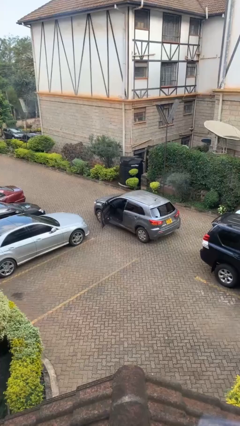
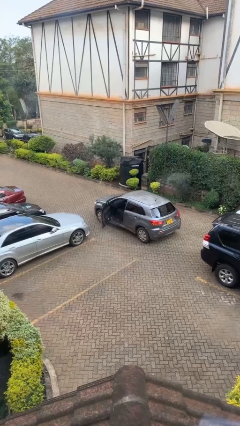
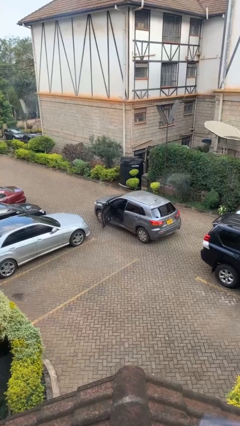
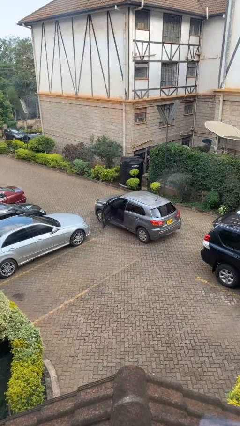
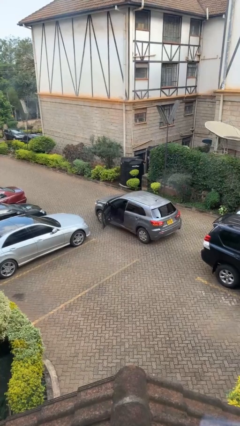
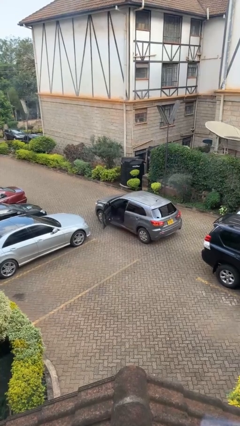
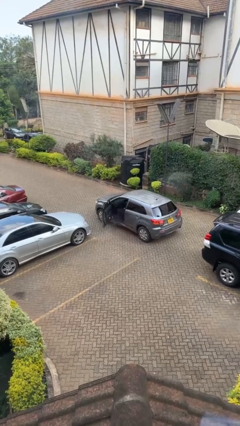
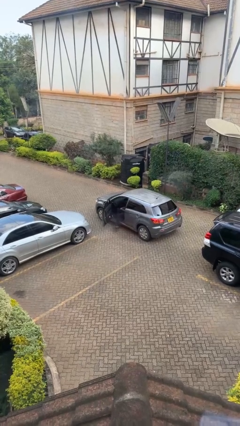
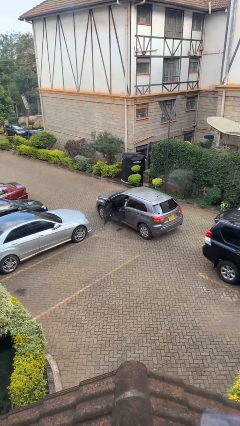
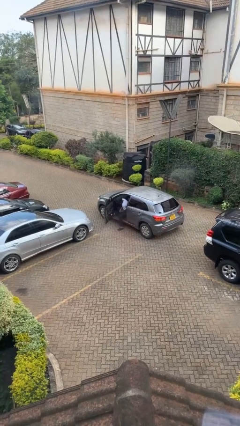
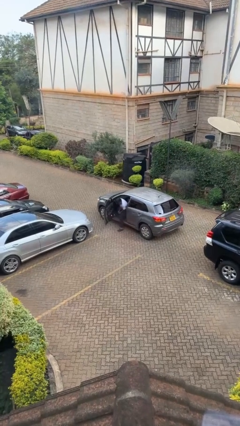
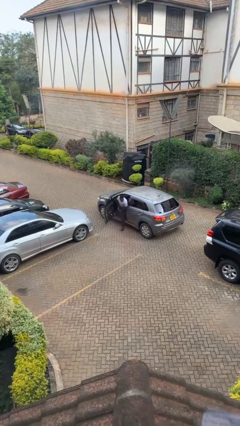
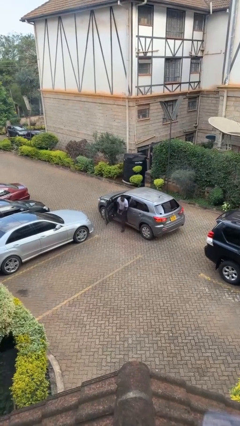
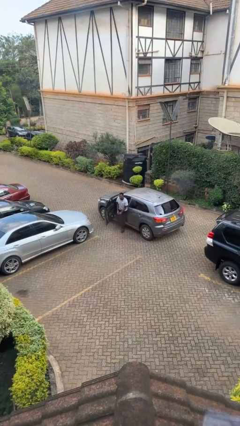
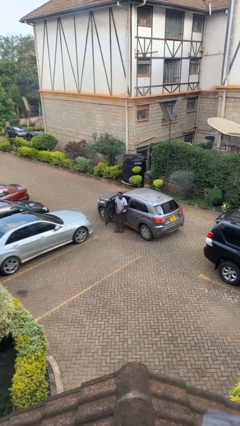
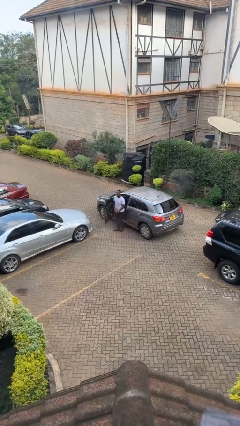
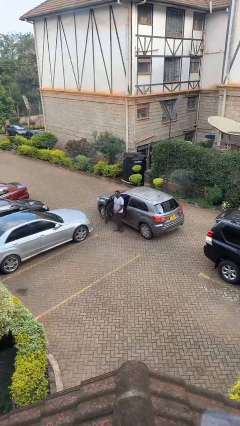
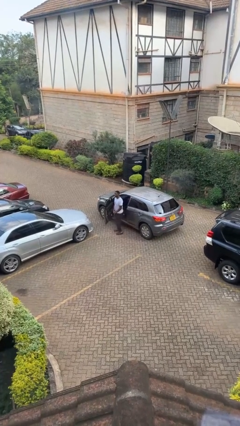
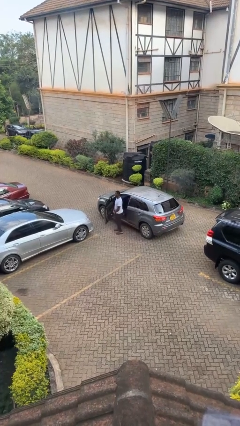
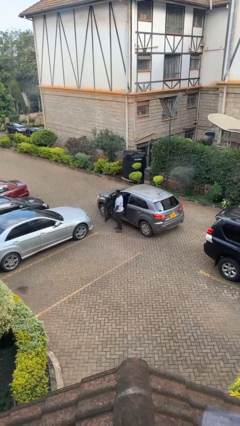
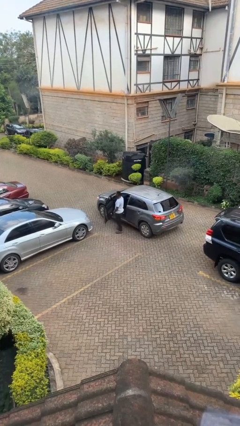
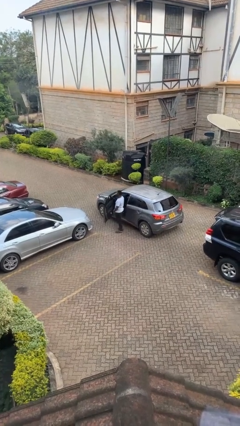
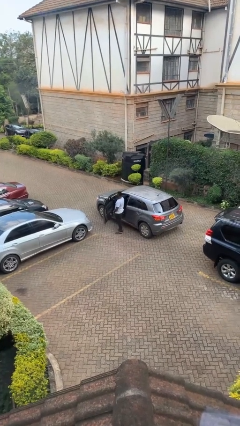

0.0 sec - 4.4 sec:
person exits car

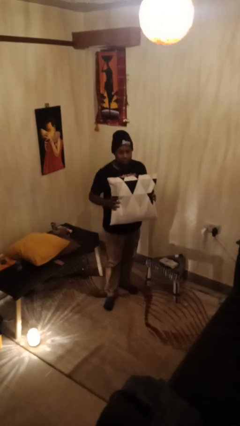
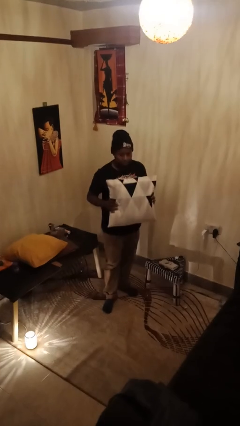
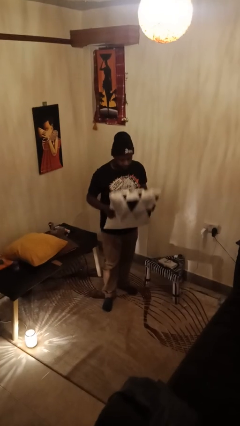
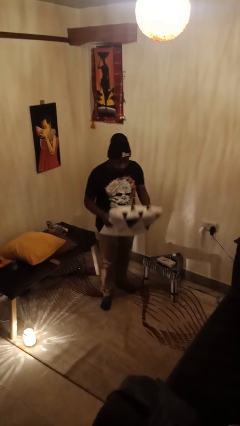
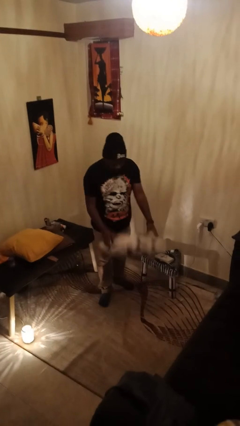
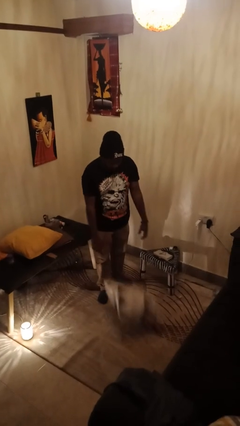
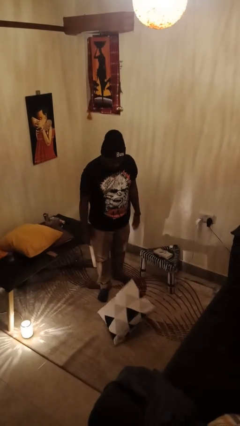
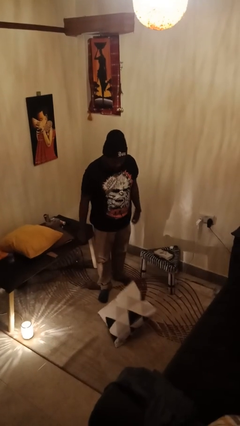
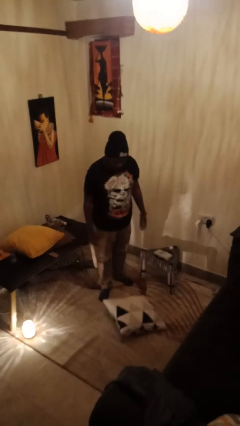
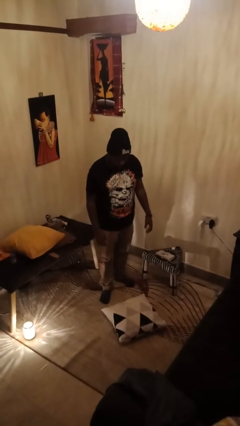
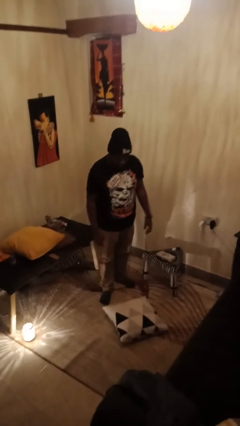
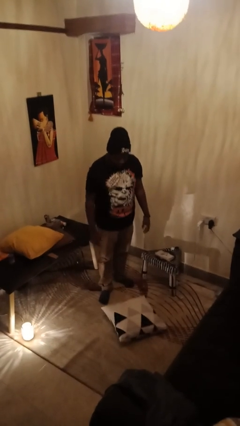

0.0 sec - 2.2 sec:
person drops object

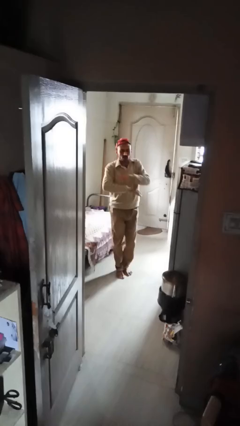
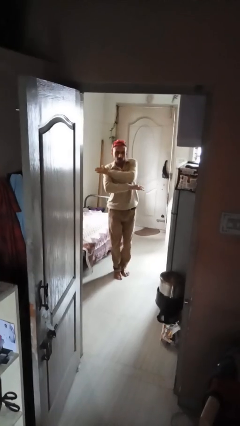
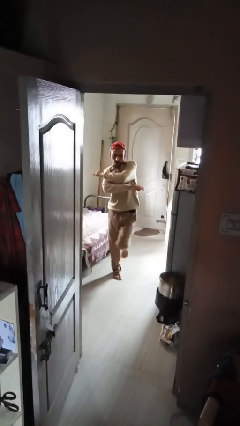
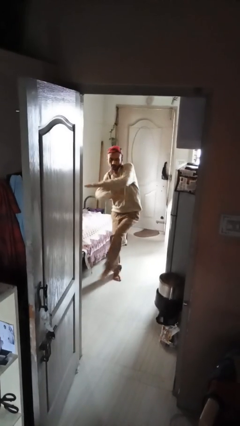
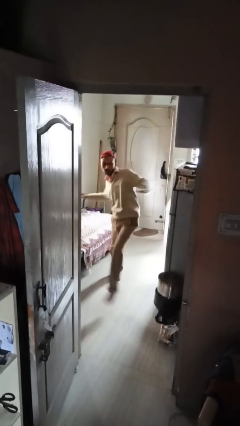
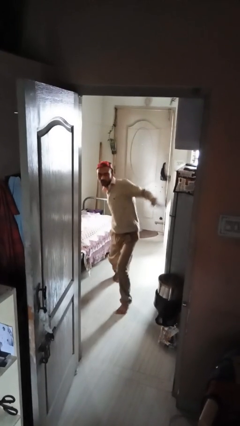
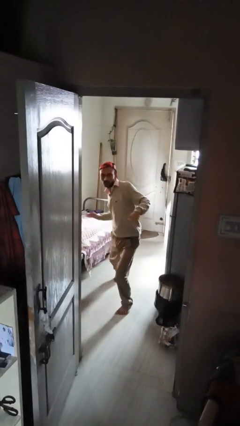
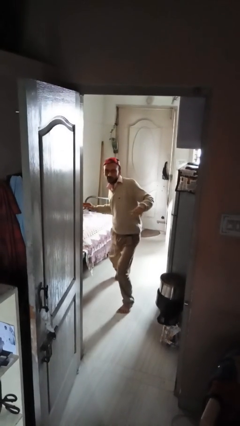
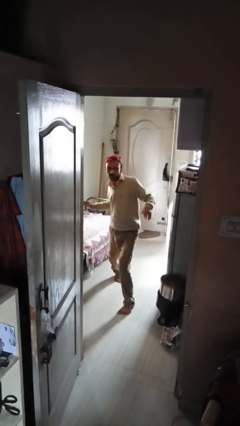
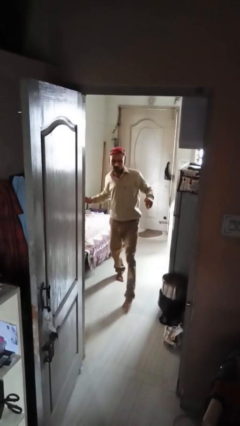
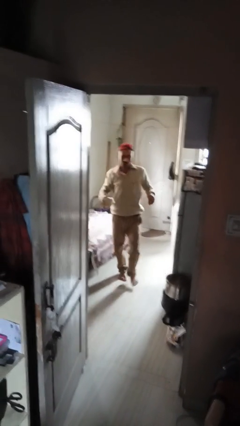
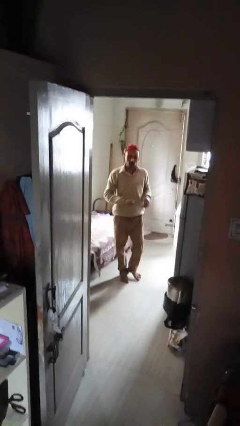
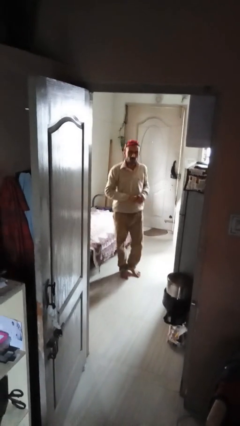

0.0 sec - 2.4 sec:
person karate chop

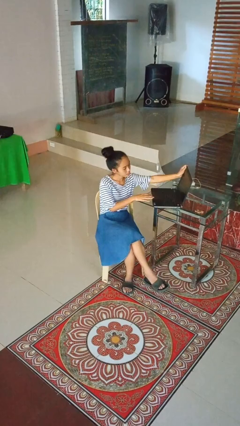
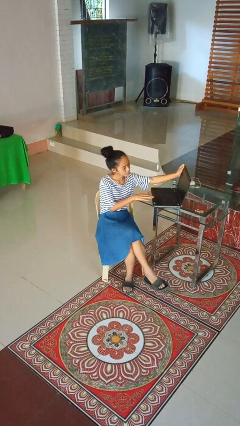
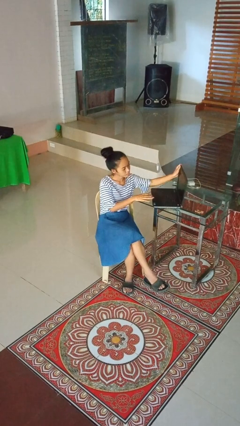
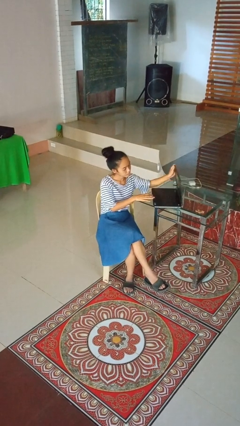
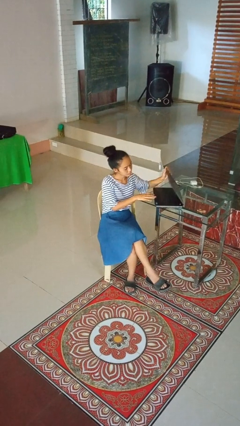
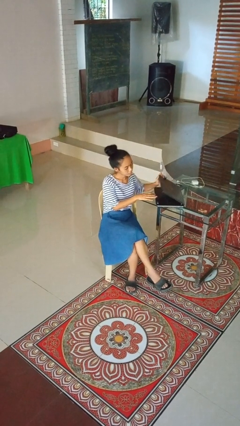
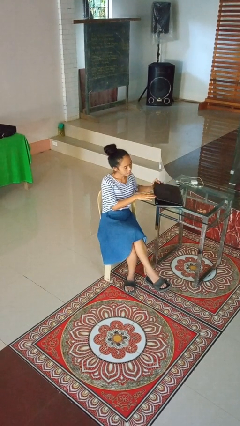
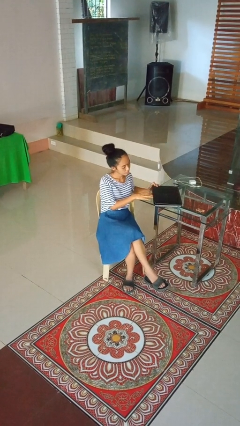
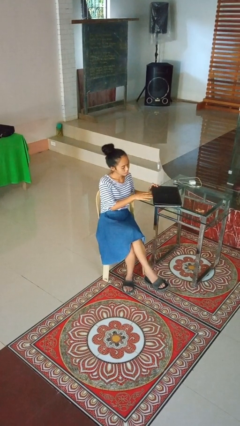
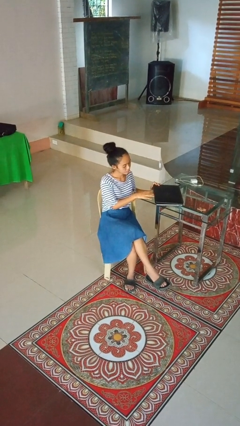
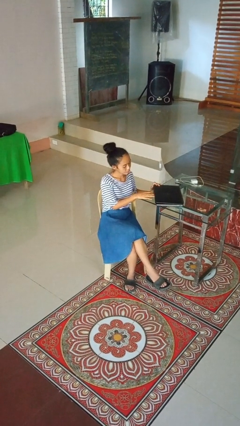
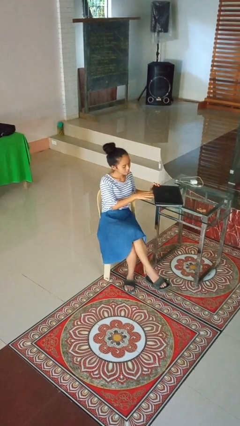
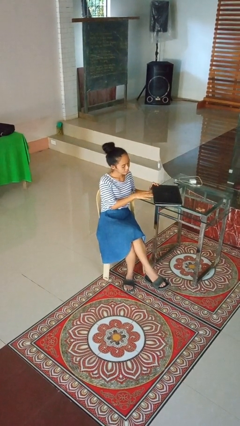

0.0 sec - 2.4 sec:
person closes laptop

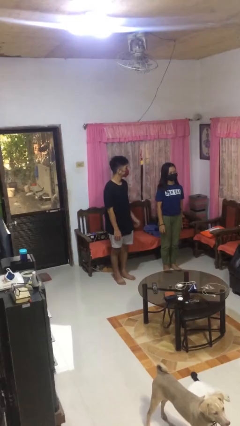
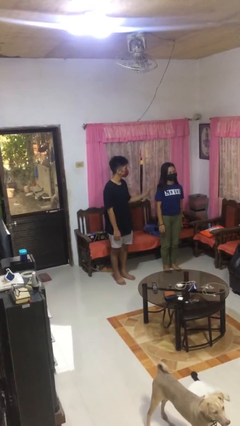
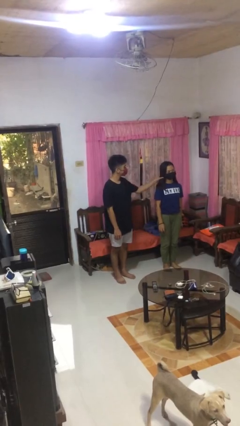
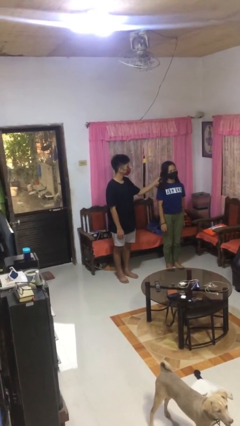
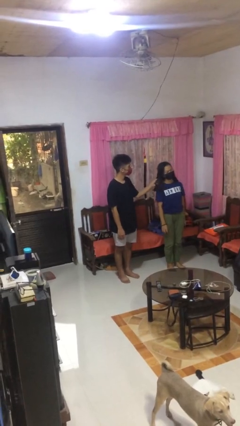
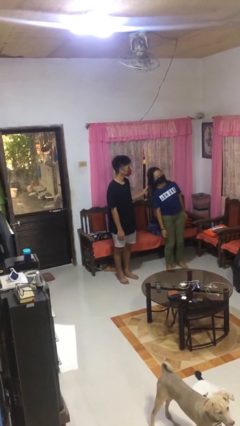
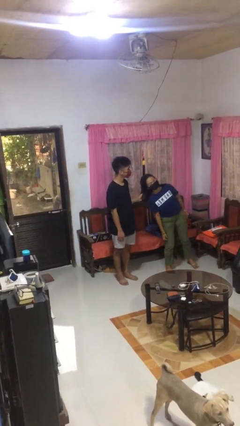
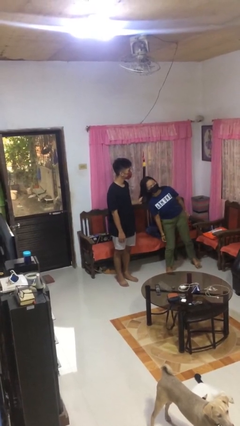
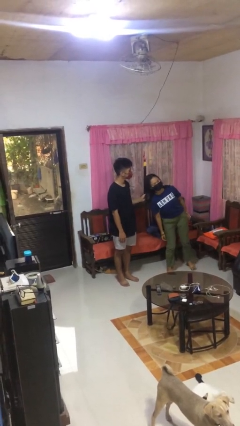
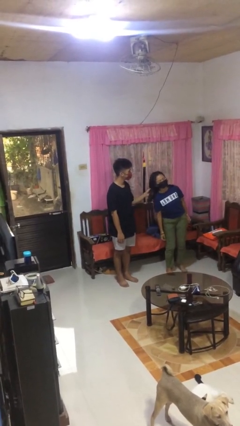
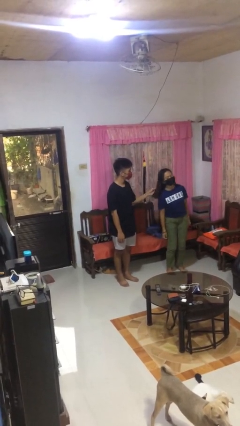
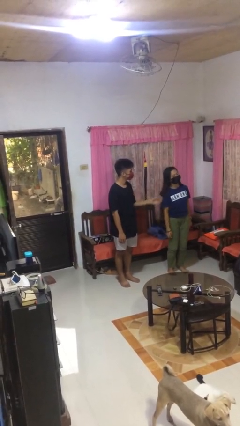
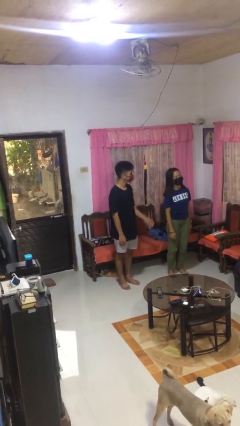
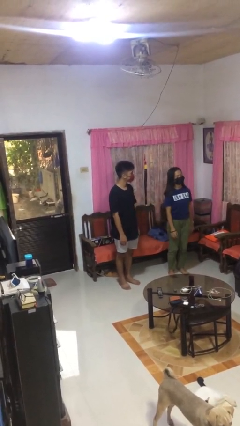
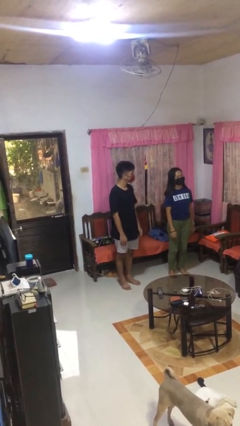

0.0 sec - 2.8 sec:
person grabs person by hair

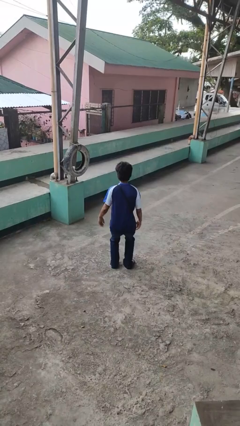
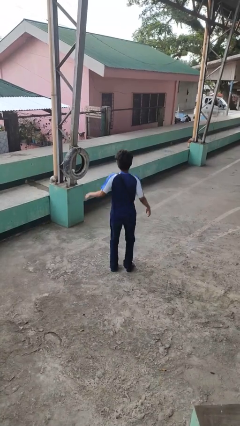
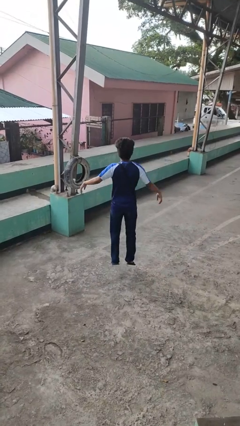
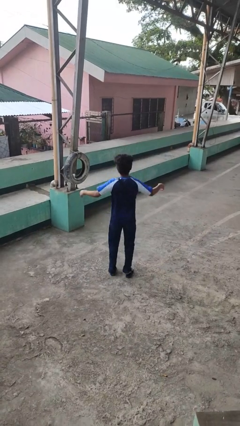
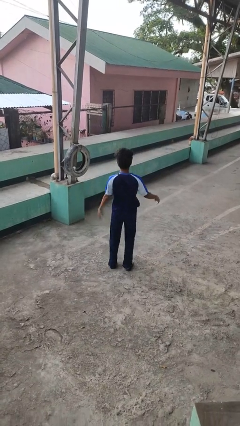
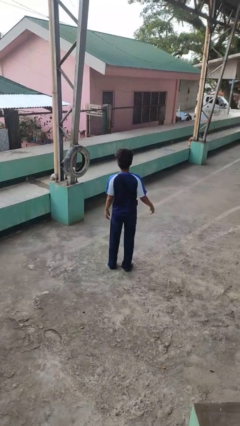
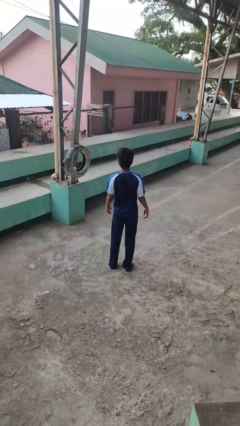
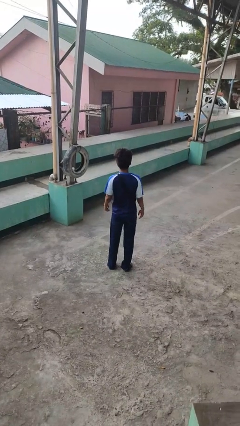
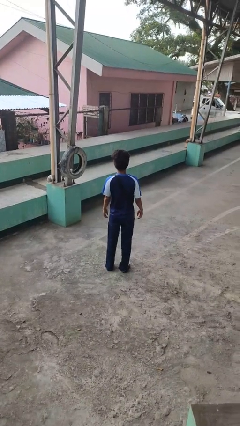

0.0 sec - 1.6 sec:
person jumps

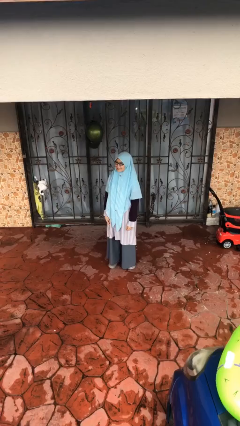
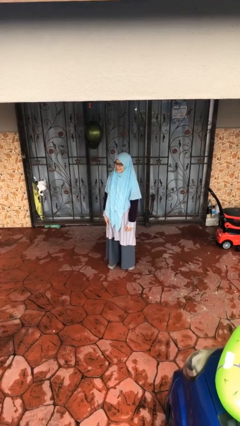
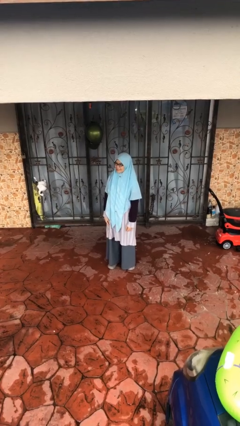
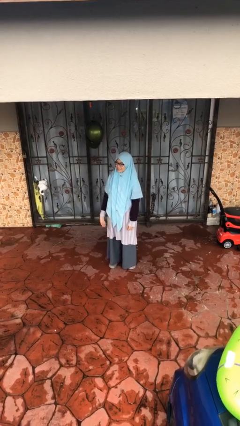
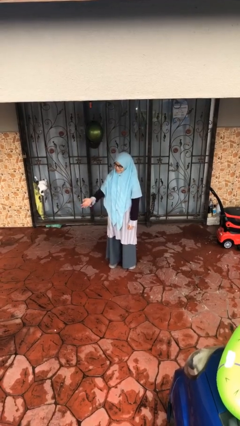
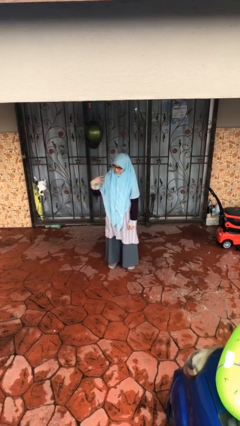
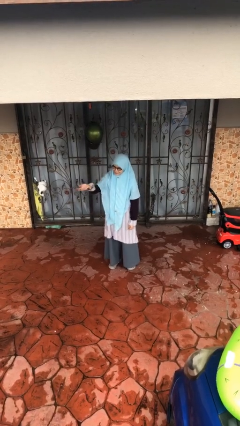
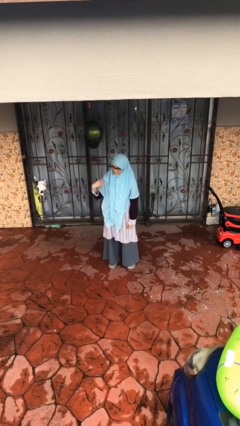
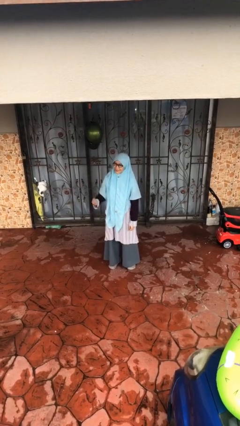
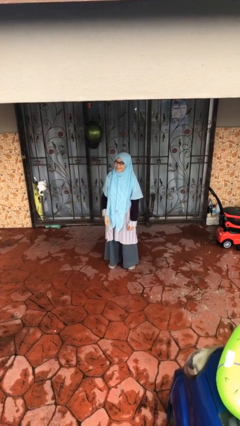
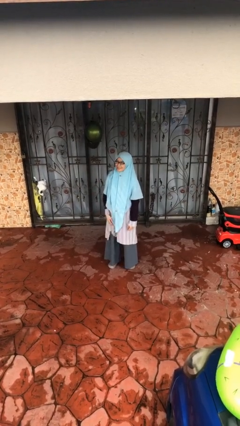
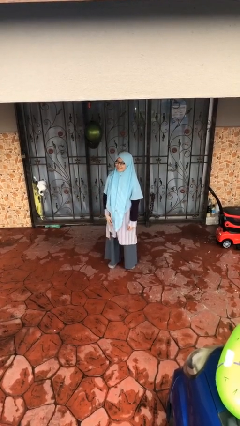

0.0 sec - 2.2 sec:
person gestures come here
